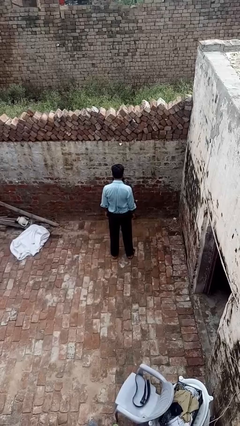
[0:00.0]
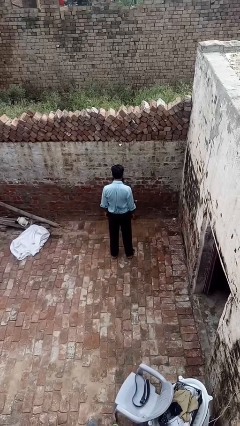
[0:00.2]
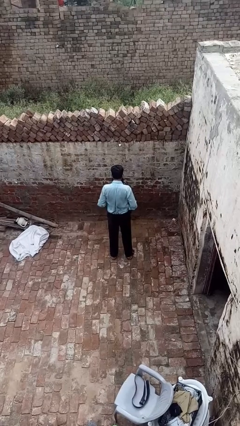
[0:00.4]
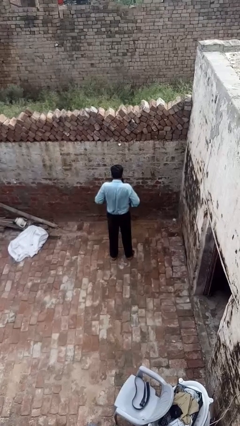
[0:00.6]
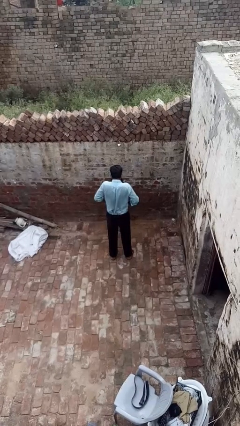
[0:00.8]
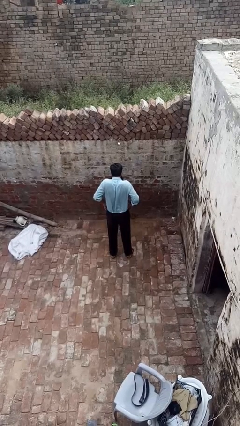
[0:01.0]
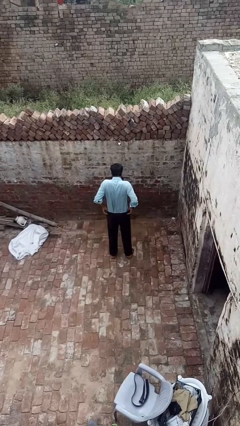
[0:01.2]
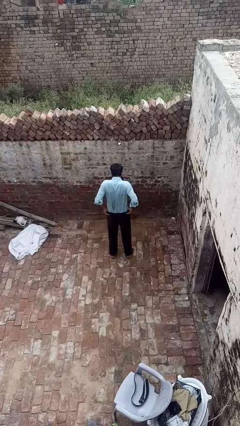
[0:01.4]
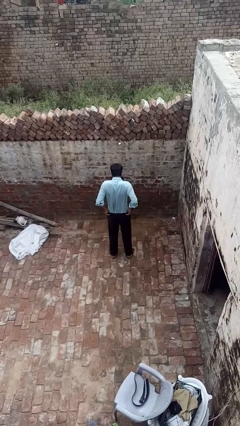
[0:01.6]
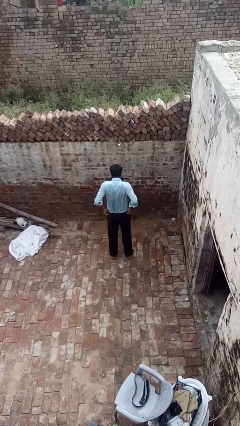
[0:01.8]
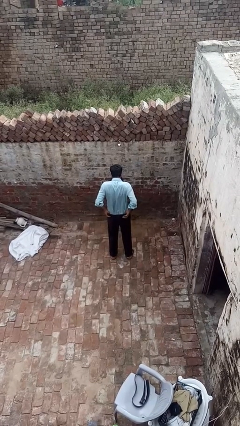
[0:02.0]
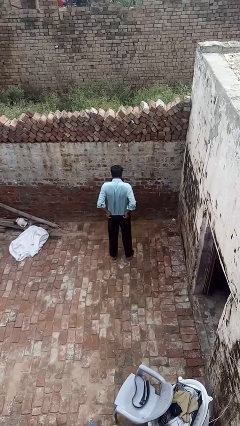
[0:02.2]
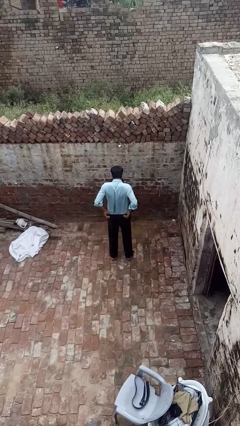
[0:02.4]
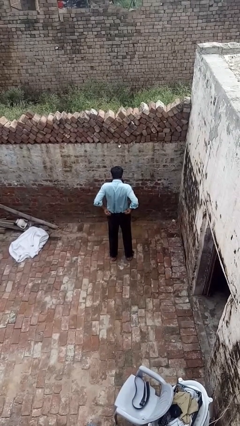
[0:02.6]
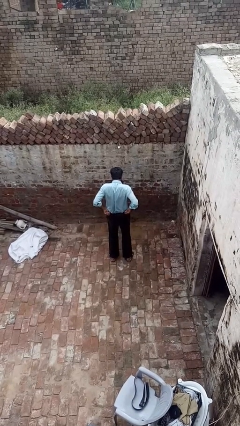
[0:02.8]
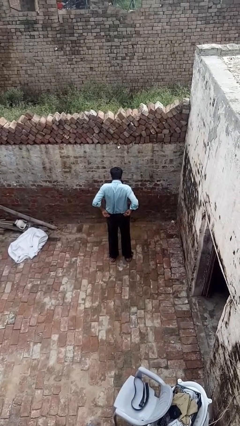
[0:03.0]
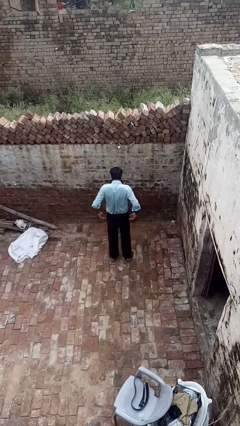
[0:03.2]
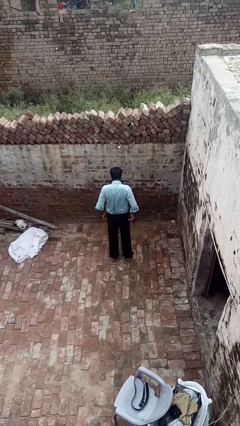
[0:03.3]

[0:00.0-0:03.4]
person hikes up pants

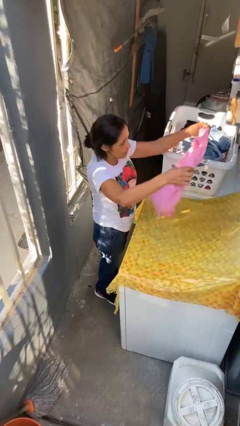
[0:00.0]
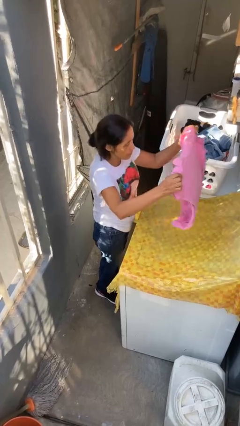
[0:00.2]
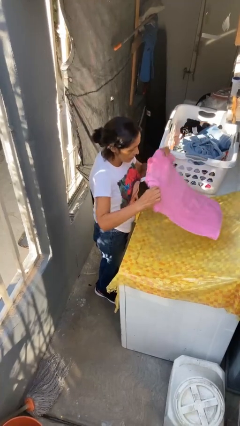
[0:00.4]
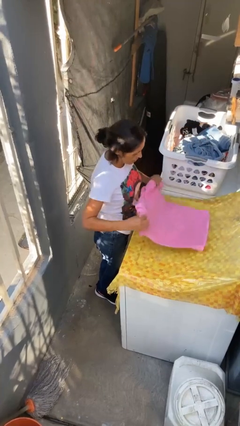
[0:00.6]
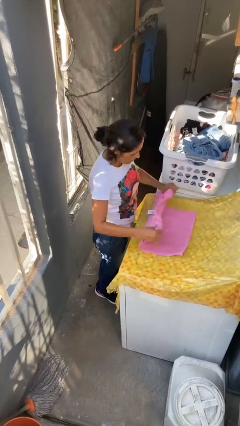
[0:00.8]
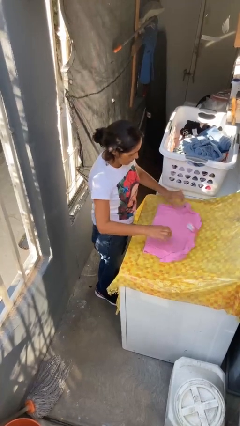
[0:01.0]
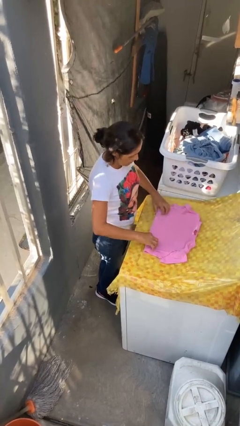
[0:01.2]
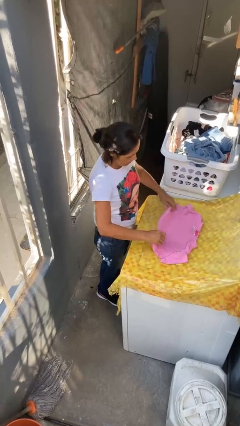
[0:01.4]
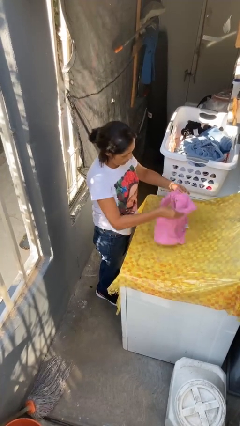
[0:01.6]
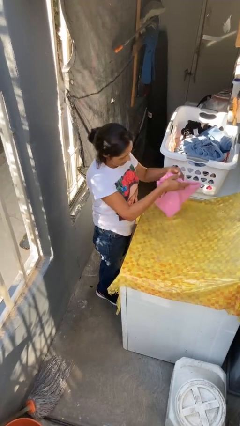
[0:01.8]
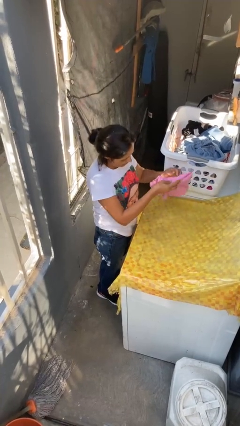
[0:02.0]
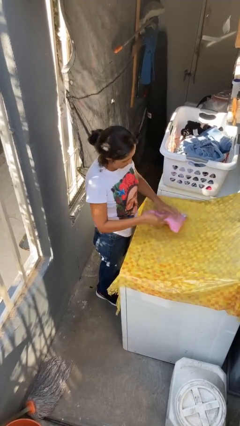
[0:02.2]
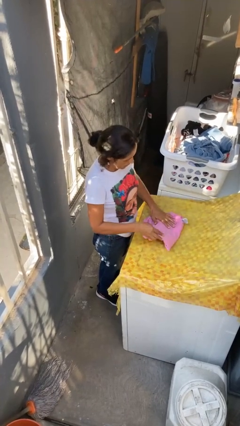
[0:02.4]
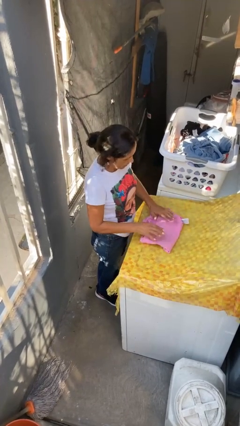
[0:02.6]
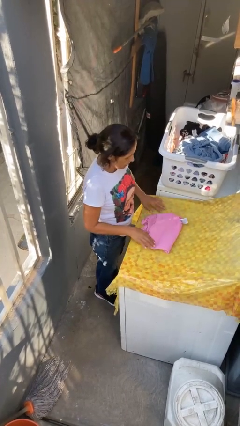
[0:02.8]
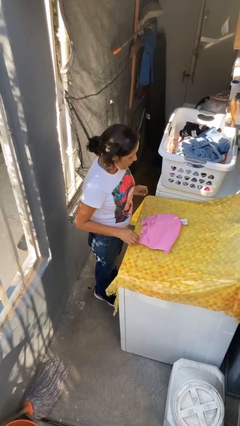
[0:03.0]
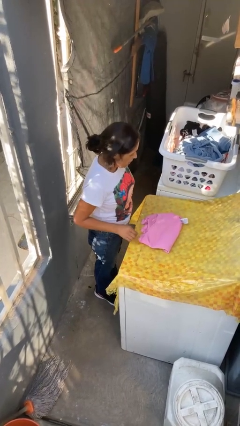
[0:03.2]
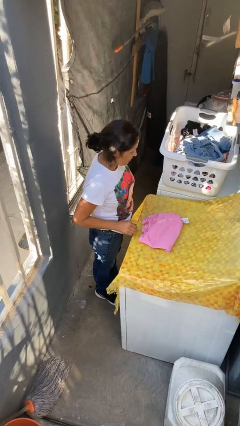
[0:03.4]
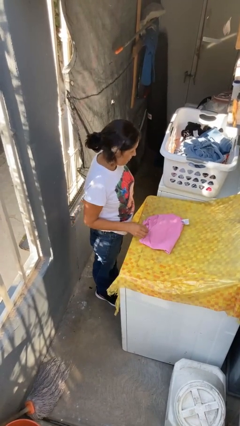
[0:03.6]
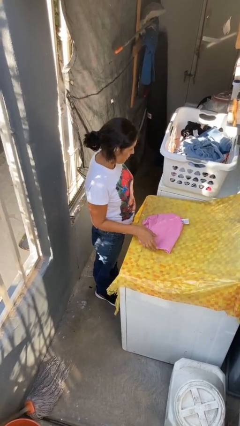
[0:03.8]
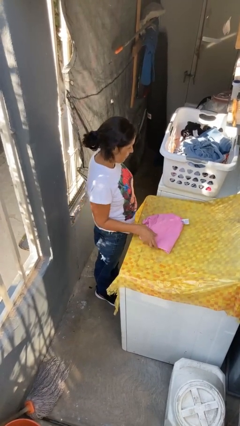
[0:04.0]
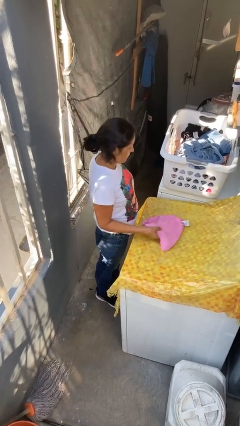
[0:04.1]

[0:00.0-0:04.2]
person folds shirt

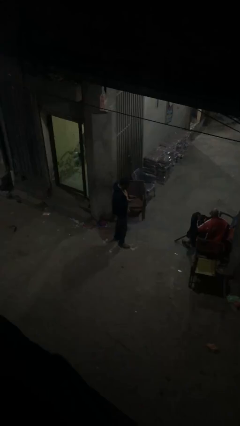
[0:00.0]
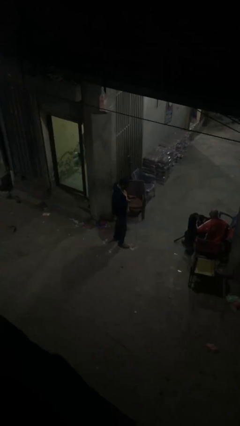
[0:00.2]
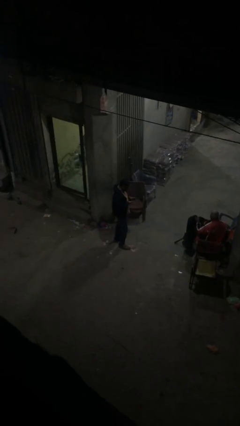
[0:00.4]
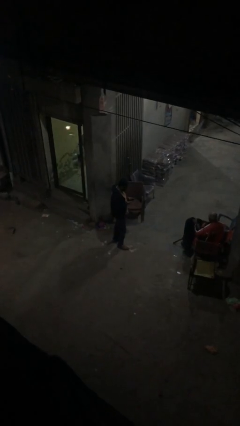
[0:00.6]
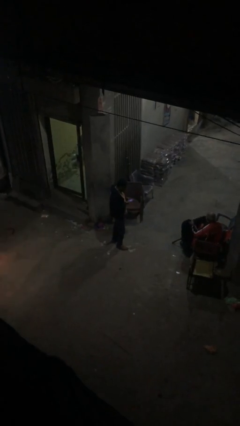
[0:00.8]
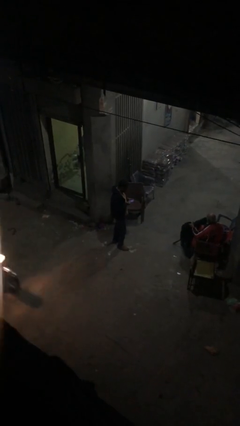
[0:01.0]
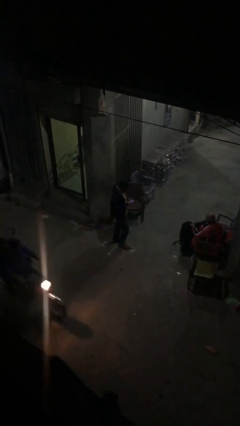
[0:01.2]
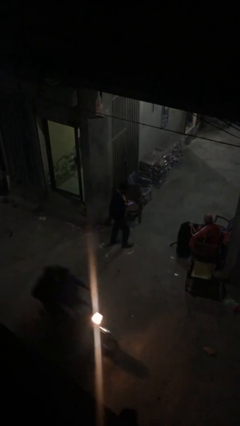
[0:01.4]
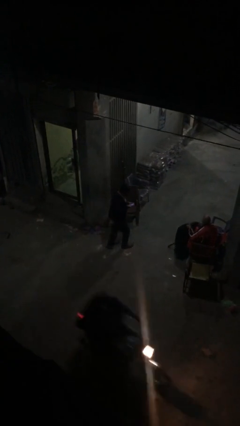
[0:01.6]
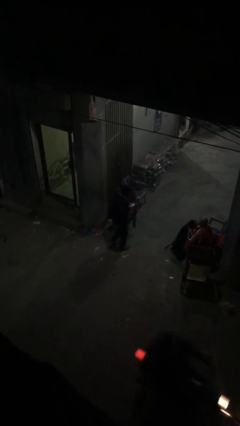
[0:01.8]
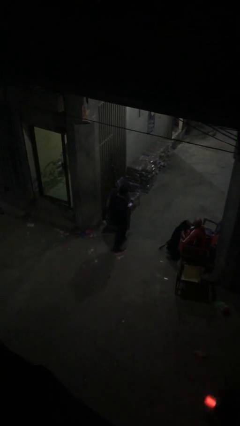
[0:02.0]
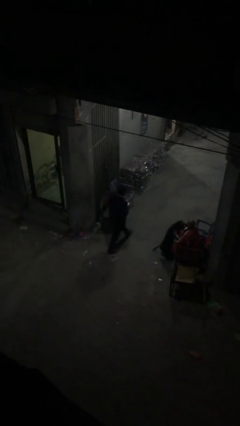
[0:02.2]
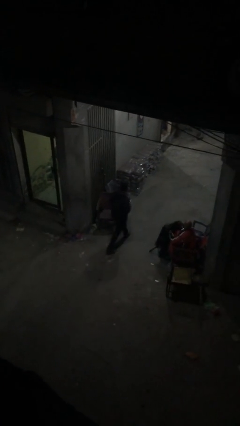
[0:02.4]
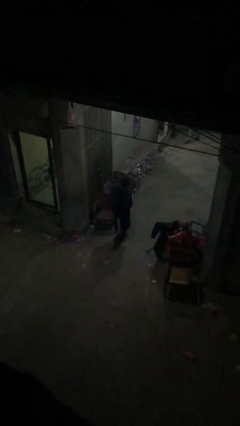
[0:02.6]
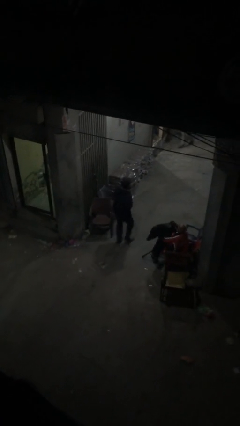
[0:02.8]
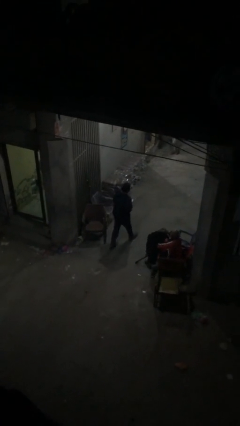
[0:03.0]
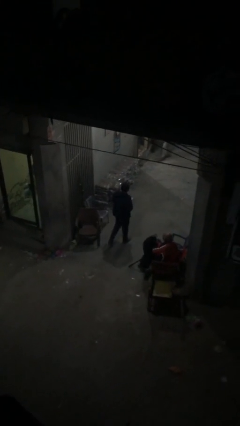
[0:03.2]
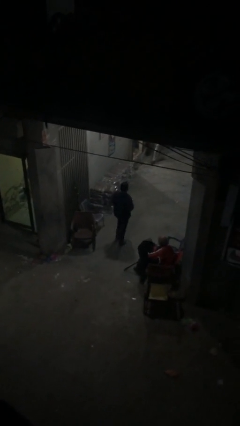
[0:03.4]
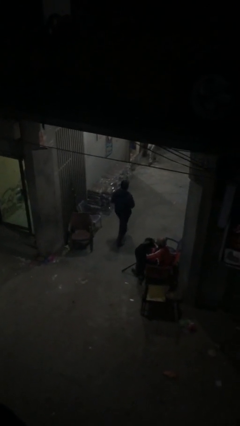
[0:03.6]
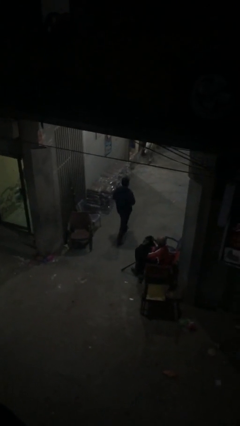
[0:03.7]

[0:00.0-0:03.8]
person enters scene through structure

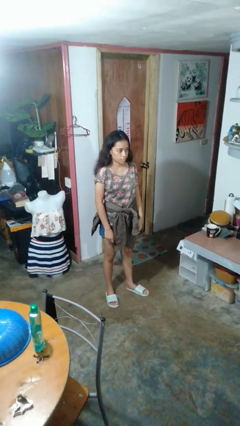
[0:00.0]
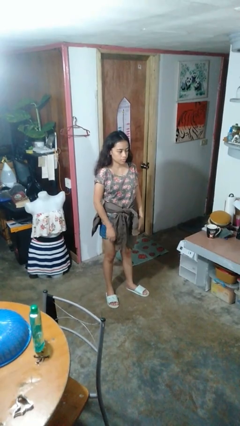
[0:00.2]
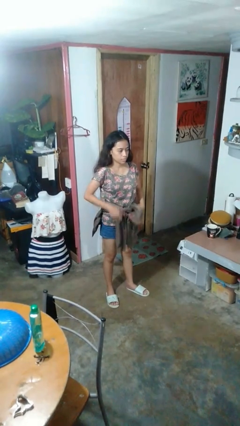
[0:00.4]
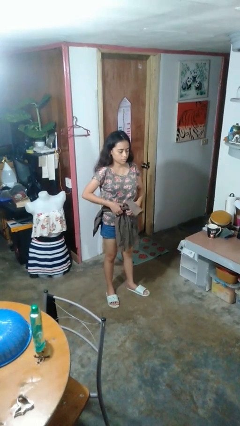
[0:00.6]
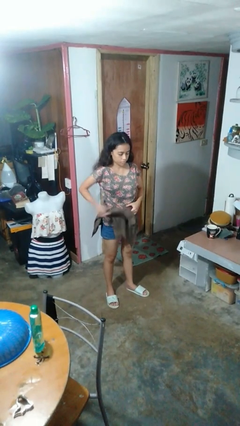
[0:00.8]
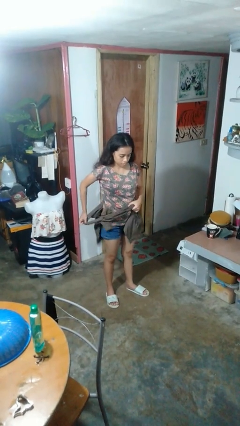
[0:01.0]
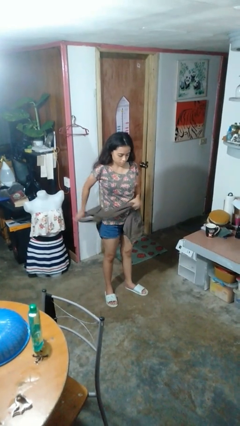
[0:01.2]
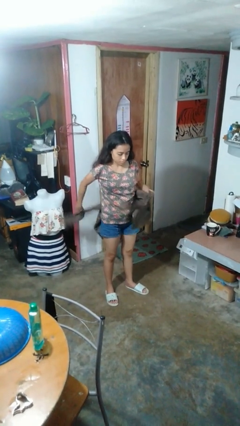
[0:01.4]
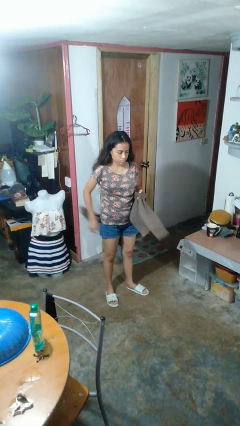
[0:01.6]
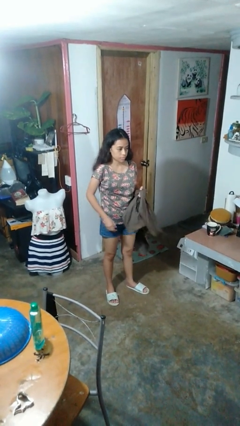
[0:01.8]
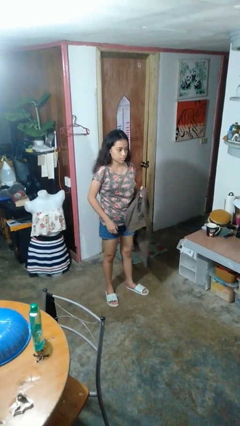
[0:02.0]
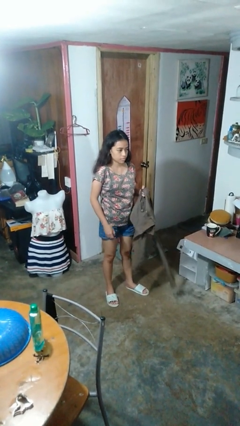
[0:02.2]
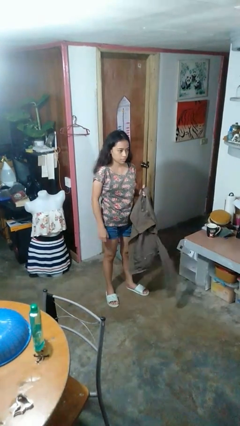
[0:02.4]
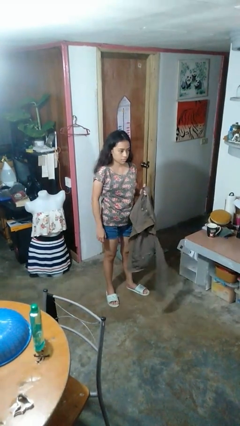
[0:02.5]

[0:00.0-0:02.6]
person unties jacket around waist

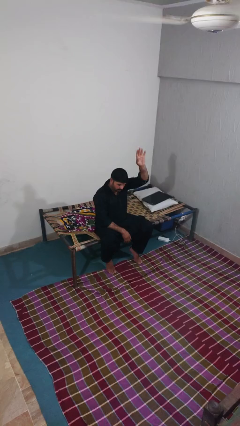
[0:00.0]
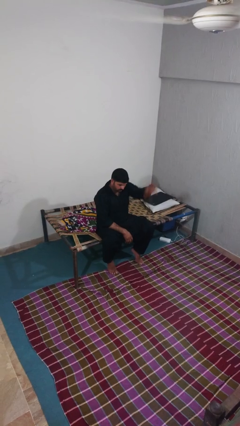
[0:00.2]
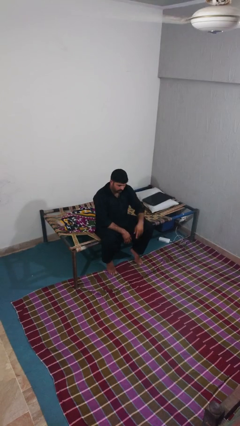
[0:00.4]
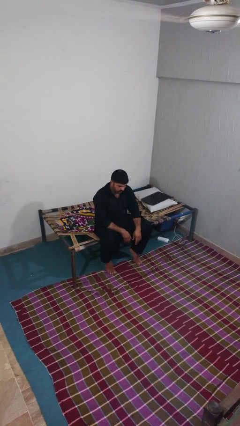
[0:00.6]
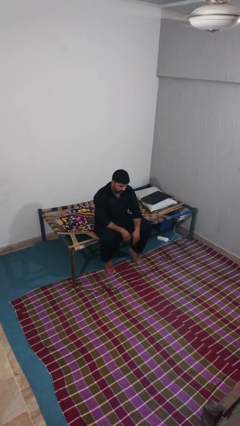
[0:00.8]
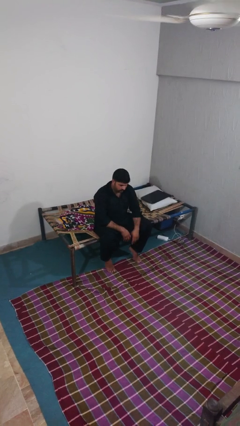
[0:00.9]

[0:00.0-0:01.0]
person gestures lower hand

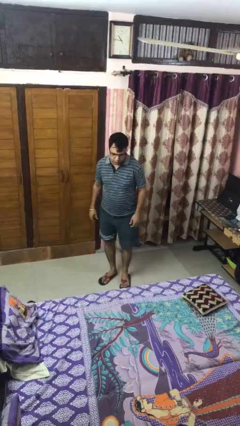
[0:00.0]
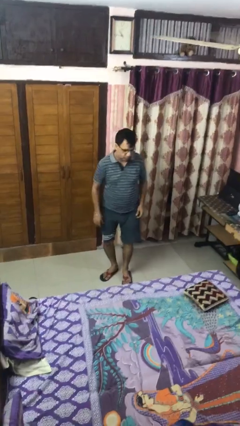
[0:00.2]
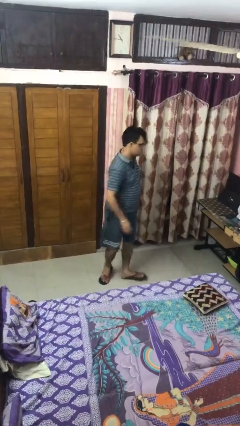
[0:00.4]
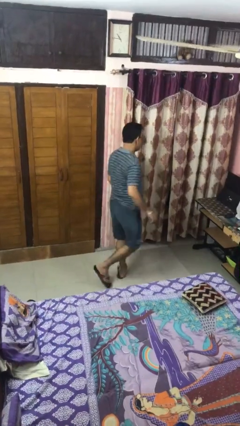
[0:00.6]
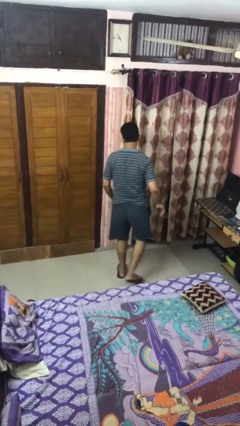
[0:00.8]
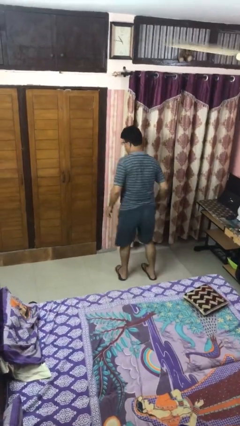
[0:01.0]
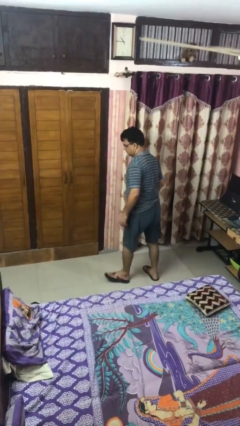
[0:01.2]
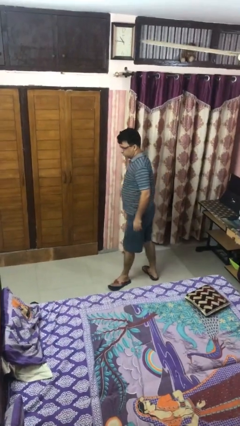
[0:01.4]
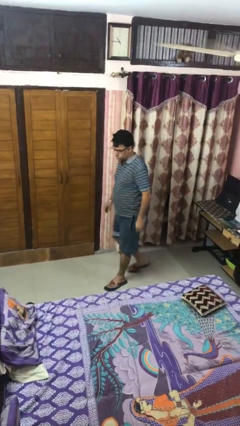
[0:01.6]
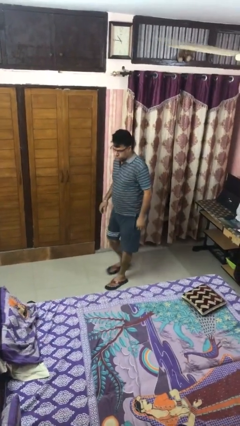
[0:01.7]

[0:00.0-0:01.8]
person twirls

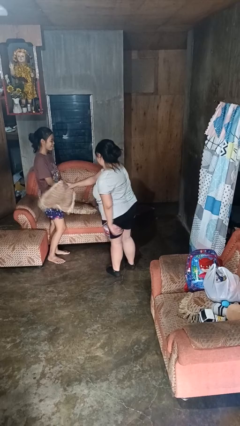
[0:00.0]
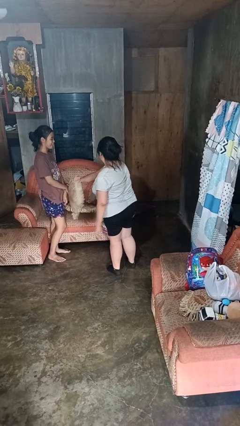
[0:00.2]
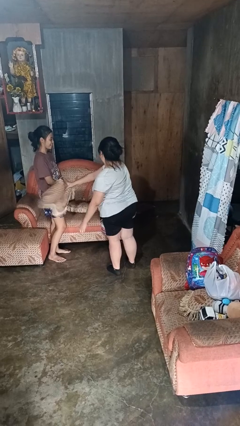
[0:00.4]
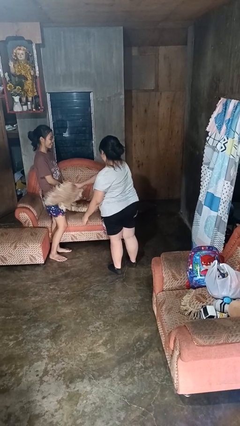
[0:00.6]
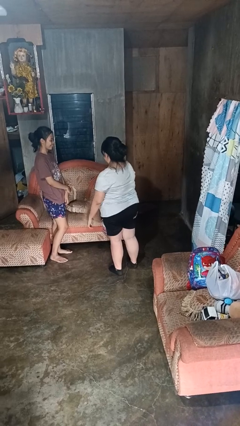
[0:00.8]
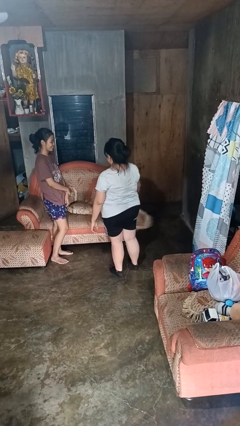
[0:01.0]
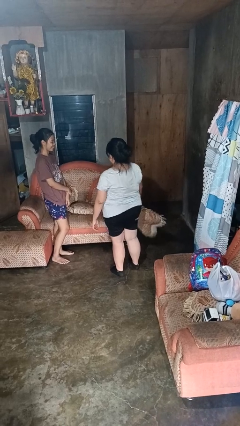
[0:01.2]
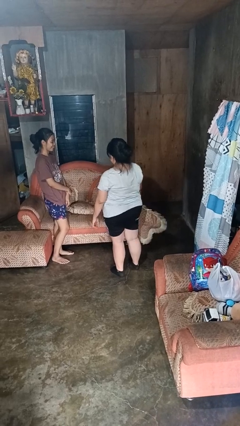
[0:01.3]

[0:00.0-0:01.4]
person hits person with pillow
